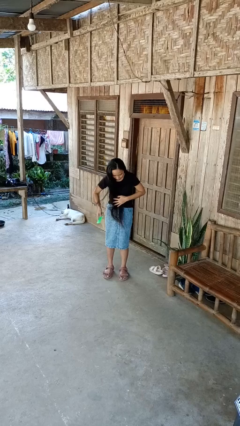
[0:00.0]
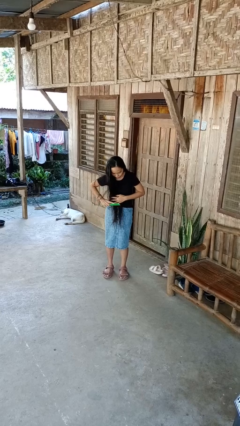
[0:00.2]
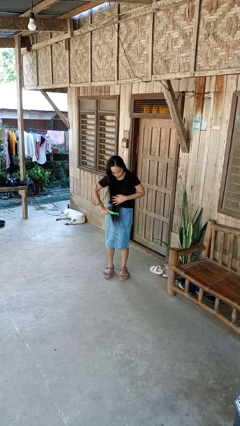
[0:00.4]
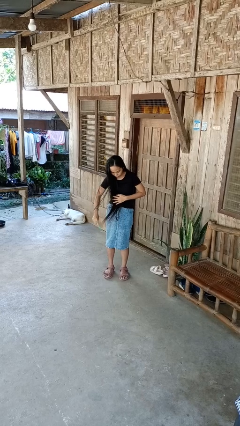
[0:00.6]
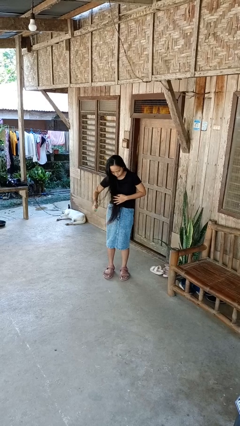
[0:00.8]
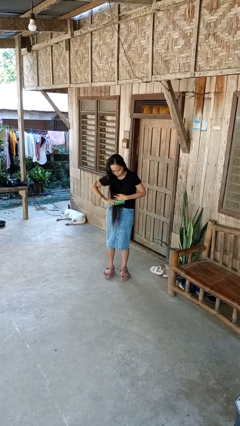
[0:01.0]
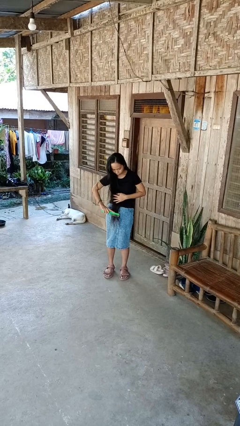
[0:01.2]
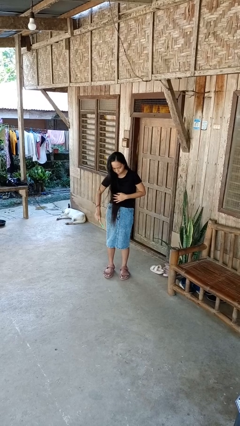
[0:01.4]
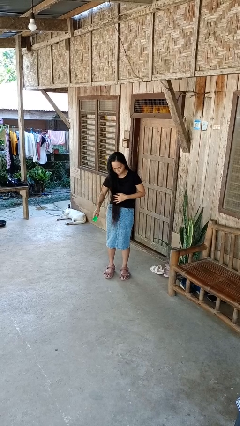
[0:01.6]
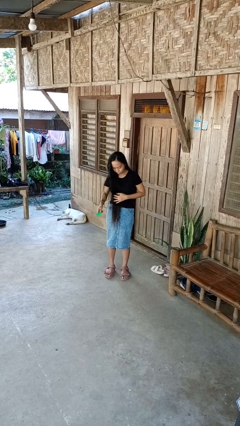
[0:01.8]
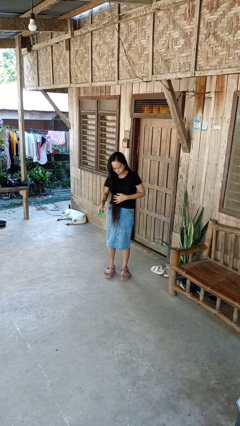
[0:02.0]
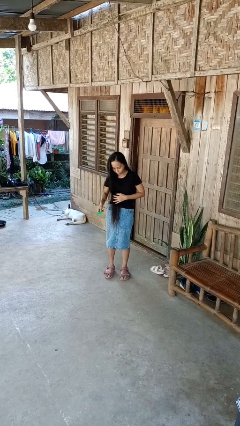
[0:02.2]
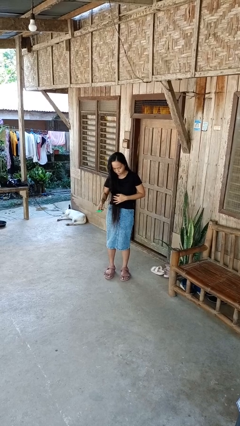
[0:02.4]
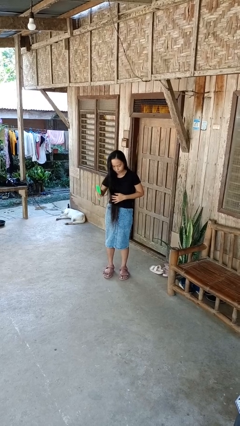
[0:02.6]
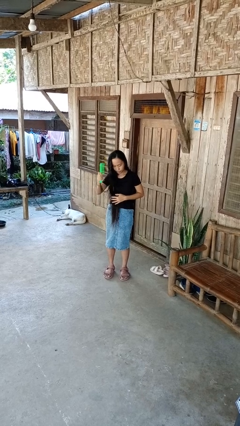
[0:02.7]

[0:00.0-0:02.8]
person brushes hair

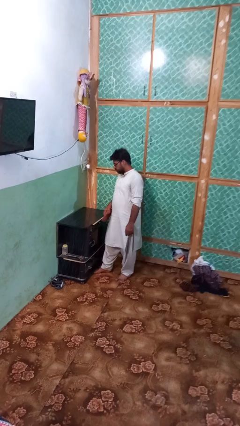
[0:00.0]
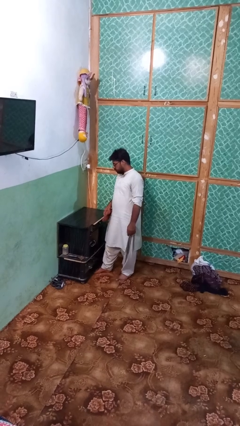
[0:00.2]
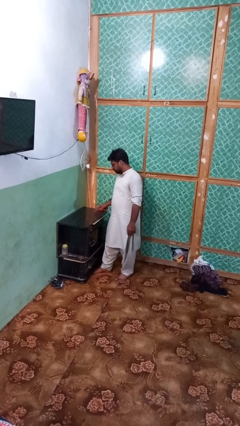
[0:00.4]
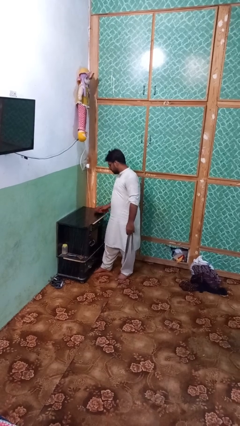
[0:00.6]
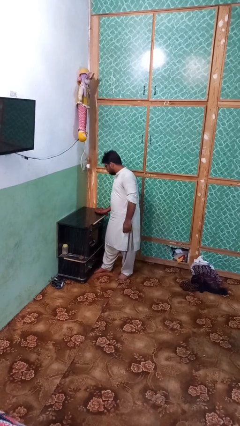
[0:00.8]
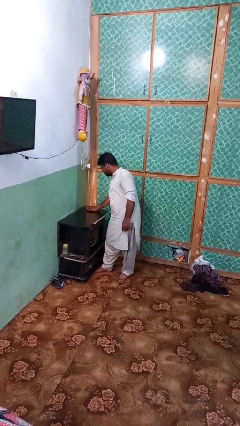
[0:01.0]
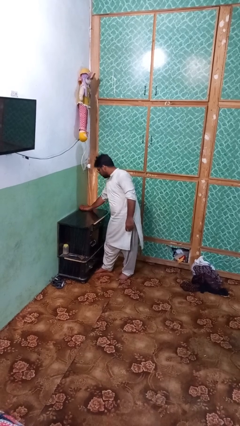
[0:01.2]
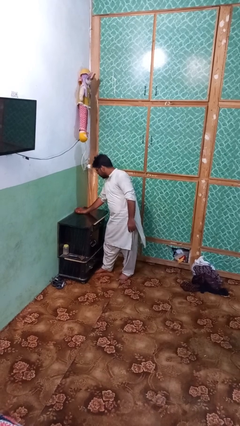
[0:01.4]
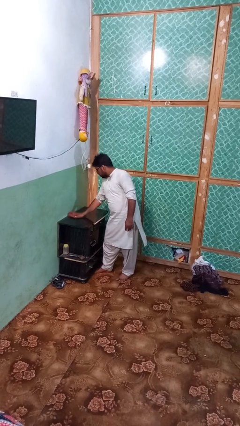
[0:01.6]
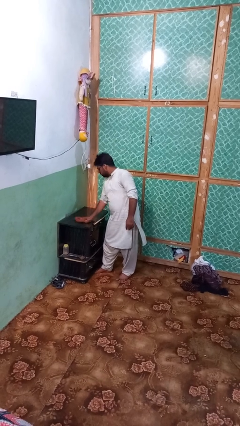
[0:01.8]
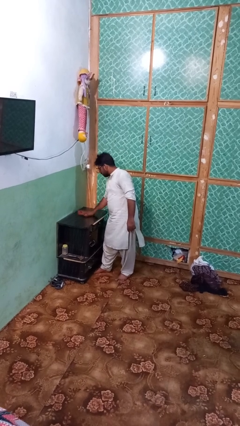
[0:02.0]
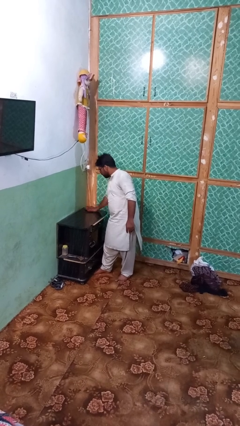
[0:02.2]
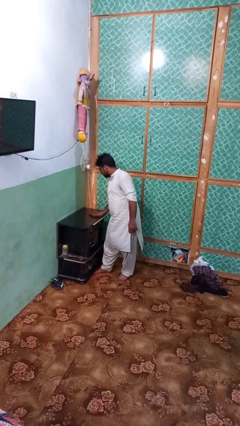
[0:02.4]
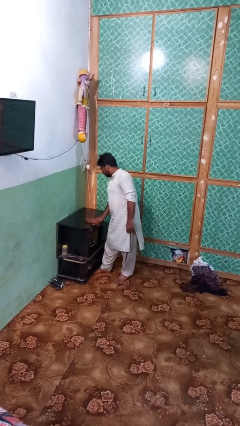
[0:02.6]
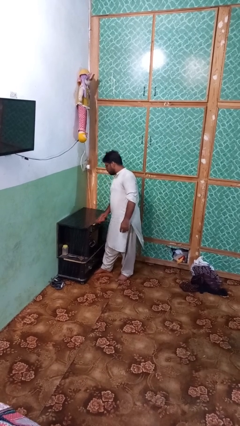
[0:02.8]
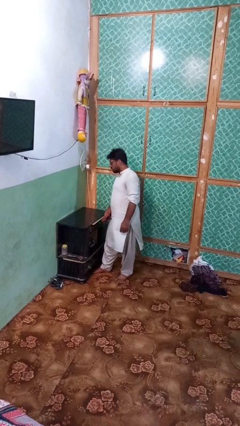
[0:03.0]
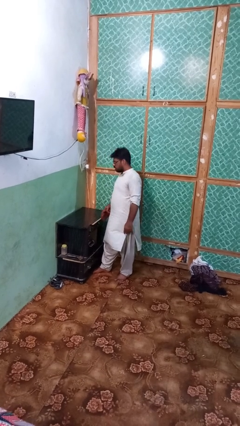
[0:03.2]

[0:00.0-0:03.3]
person cleans table with rag

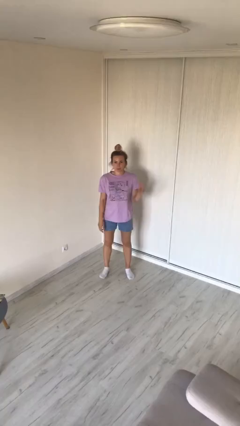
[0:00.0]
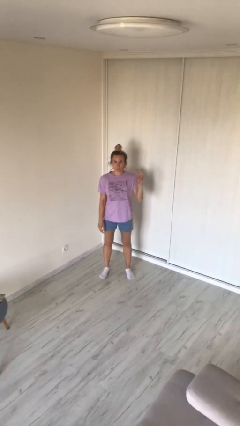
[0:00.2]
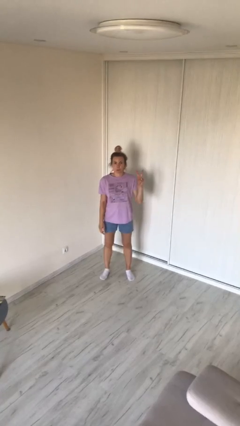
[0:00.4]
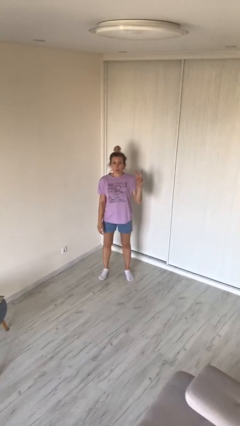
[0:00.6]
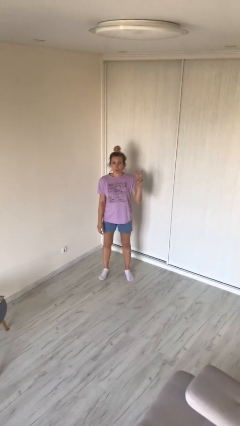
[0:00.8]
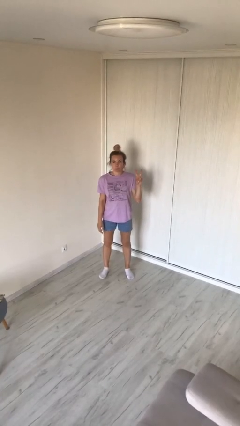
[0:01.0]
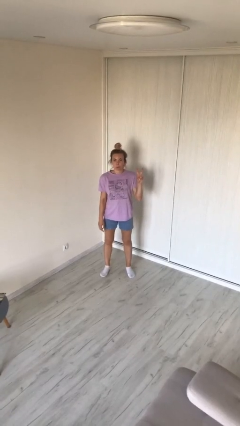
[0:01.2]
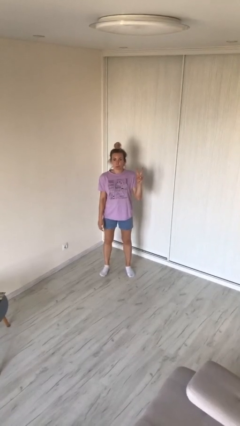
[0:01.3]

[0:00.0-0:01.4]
person gestures peace

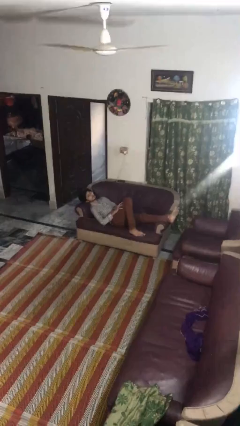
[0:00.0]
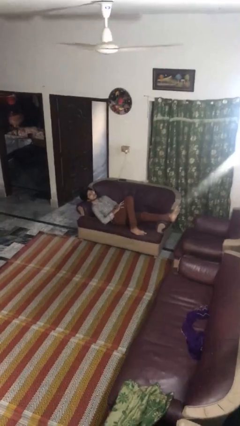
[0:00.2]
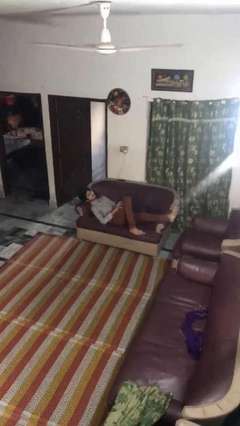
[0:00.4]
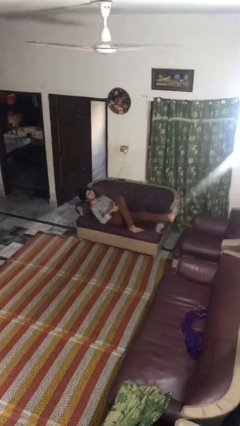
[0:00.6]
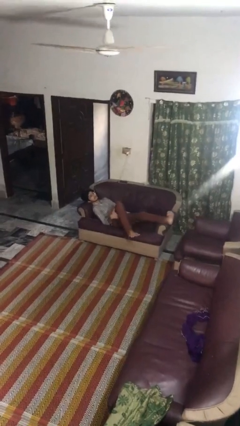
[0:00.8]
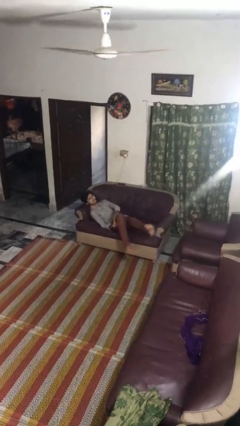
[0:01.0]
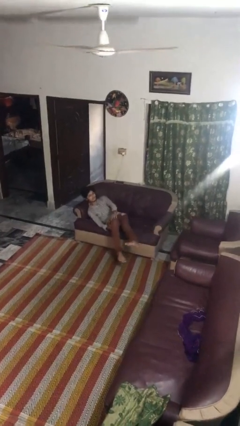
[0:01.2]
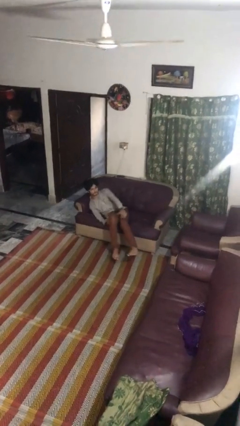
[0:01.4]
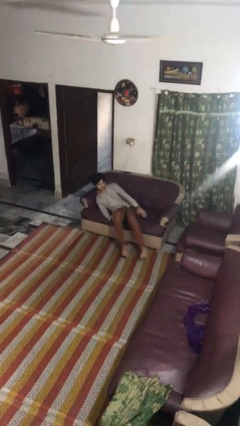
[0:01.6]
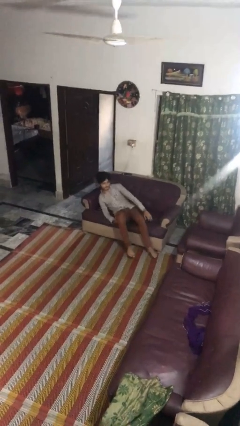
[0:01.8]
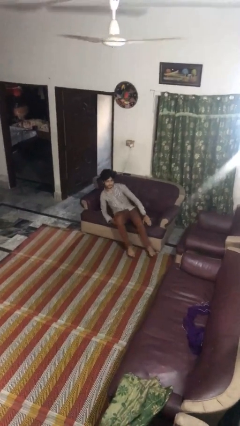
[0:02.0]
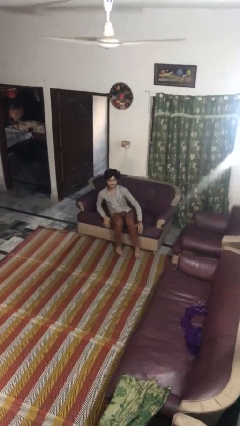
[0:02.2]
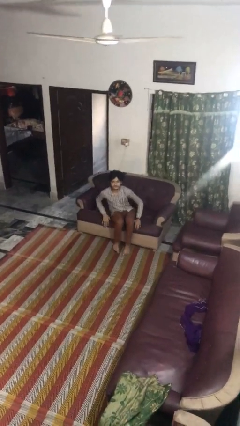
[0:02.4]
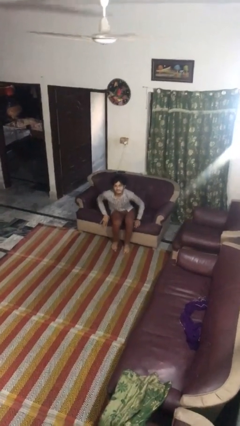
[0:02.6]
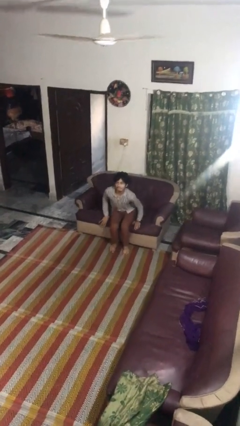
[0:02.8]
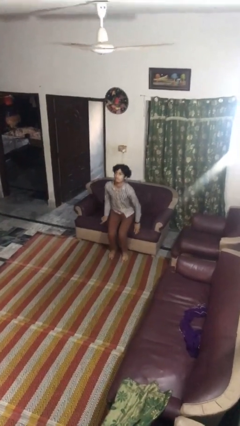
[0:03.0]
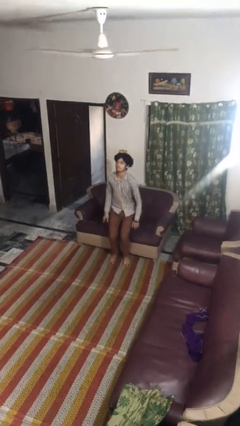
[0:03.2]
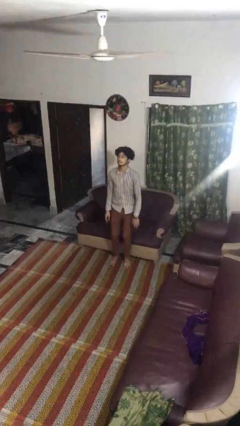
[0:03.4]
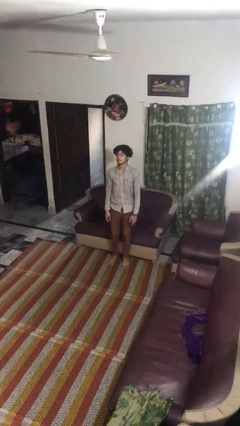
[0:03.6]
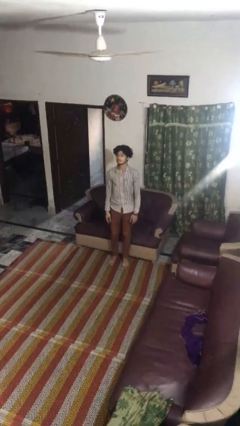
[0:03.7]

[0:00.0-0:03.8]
person stands up

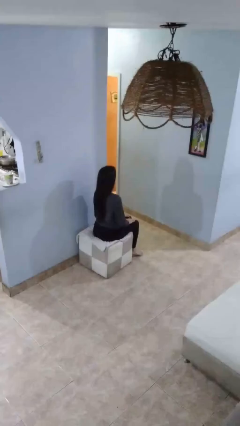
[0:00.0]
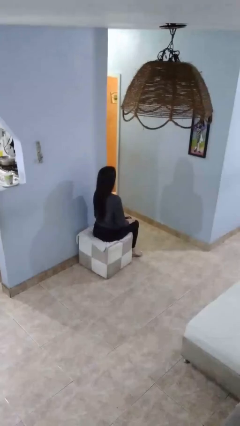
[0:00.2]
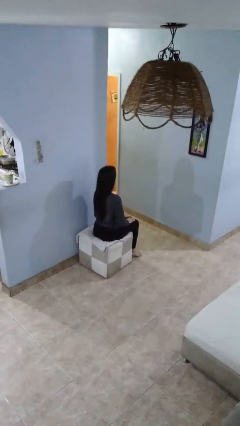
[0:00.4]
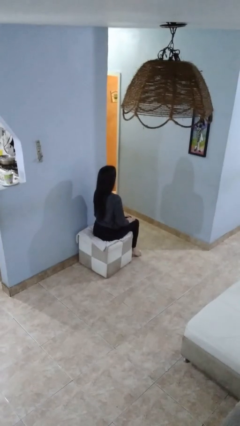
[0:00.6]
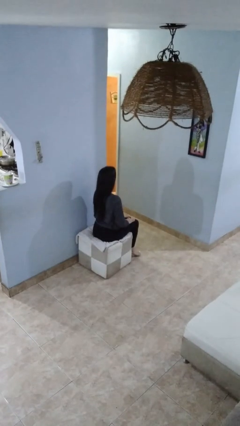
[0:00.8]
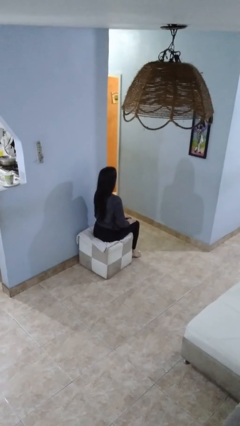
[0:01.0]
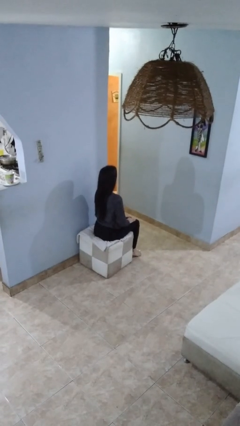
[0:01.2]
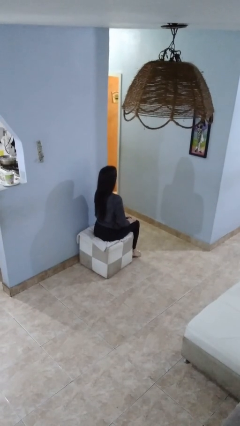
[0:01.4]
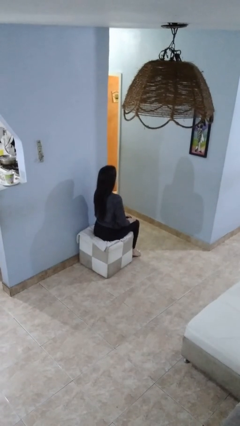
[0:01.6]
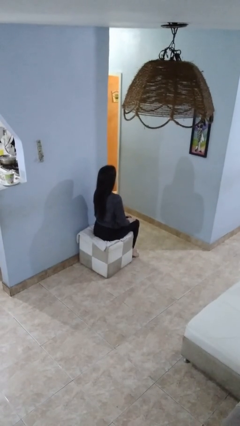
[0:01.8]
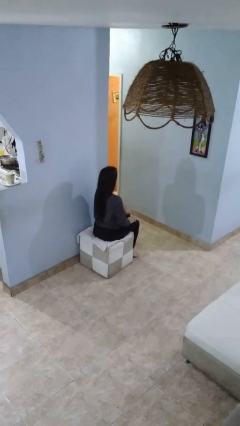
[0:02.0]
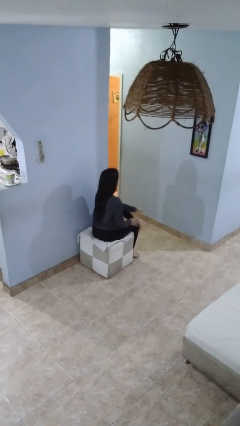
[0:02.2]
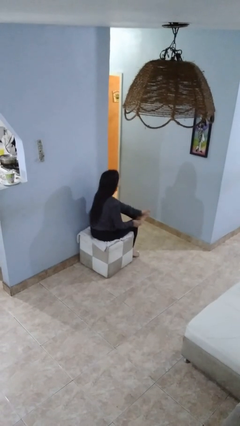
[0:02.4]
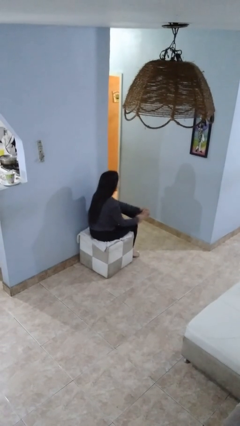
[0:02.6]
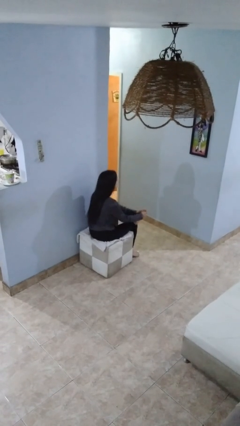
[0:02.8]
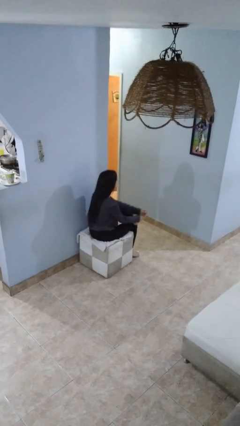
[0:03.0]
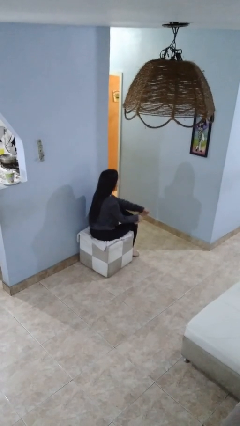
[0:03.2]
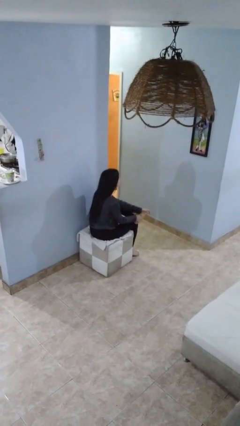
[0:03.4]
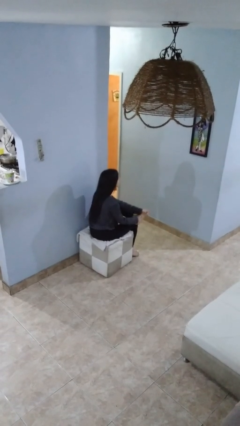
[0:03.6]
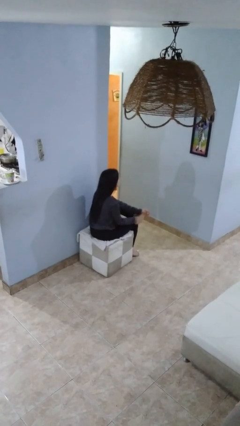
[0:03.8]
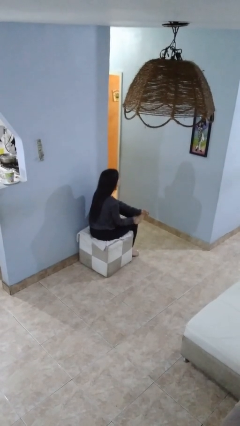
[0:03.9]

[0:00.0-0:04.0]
person rubs foot

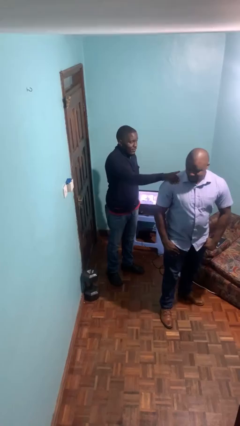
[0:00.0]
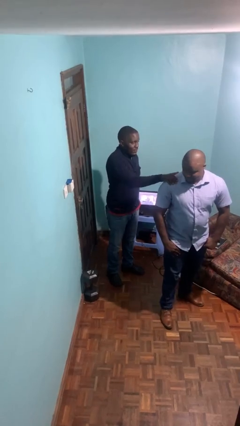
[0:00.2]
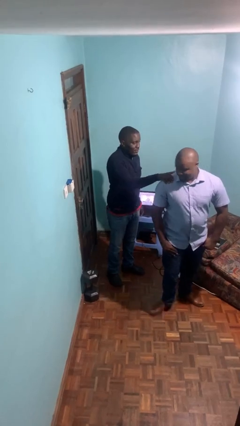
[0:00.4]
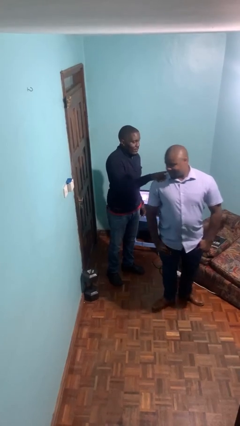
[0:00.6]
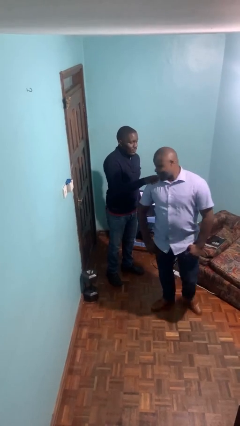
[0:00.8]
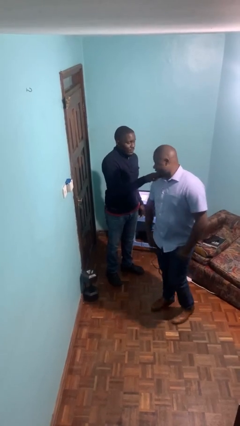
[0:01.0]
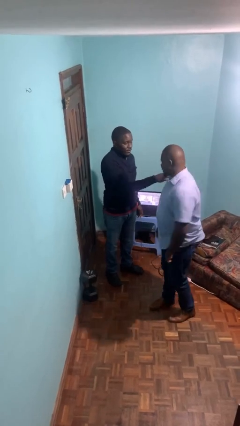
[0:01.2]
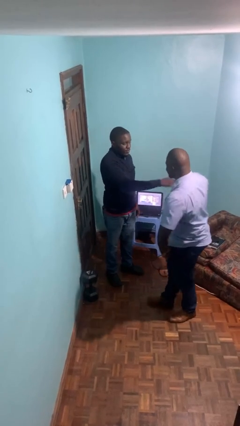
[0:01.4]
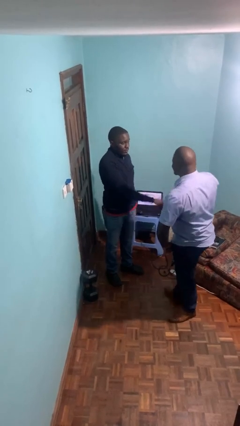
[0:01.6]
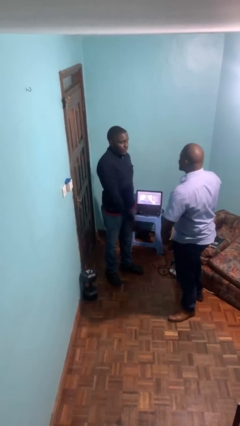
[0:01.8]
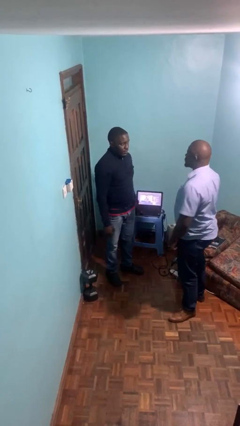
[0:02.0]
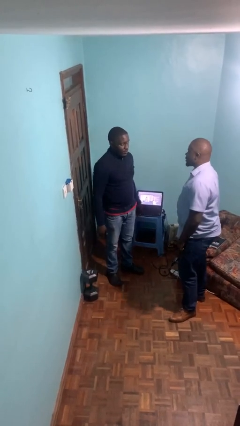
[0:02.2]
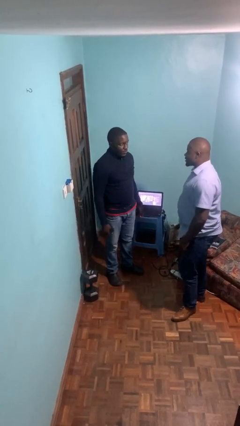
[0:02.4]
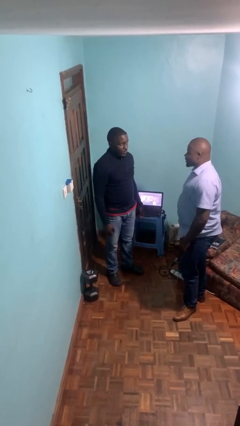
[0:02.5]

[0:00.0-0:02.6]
person spins person around
